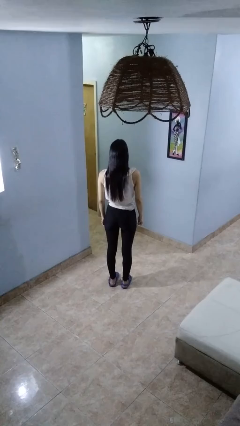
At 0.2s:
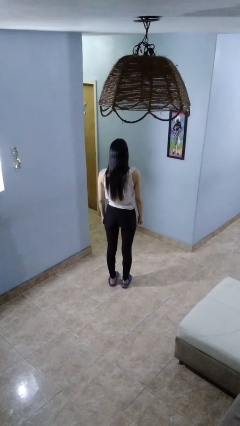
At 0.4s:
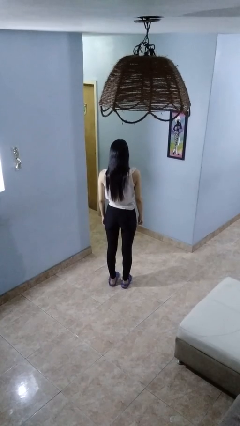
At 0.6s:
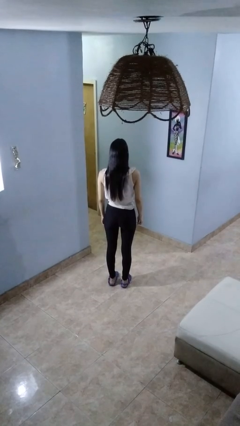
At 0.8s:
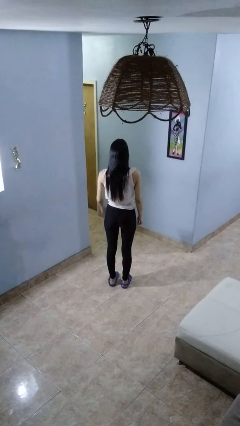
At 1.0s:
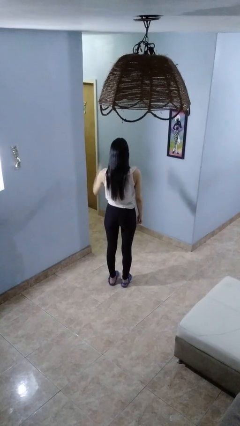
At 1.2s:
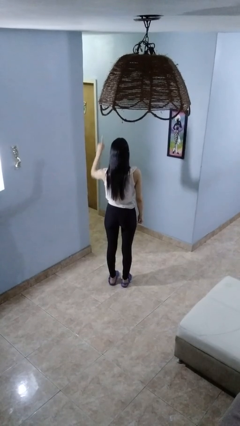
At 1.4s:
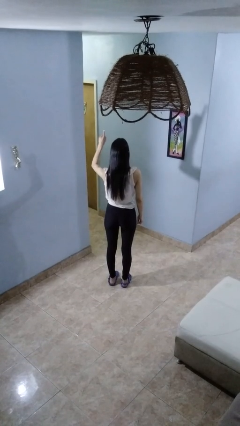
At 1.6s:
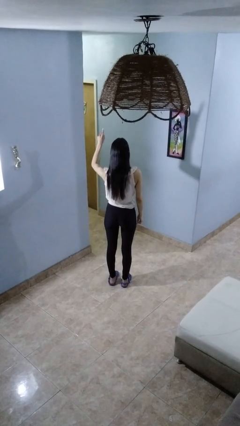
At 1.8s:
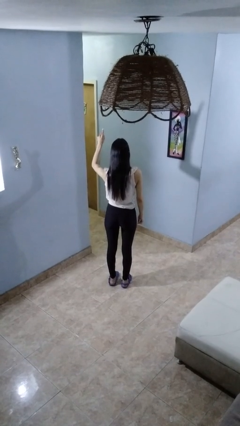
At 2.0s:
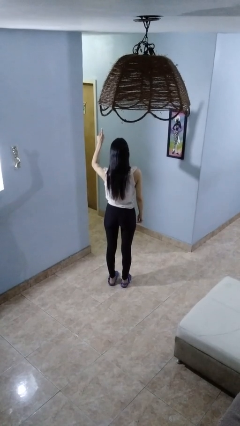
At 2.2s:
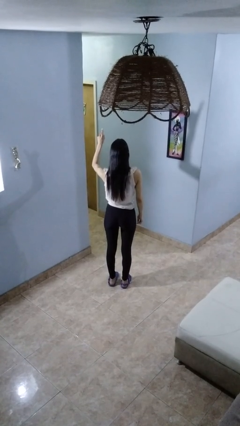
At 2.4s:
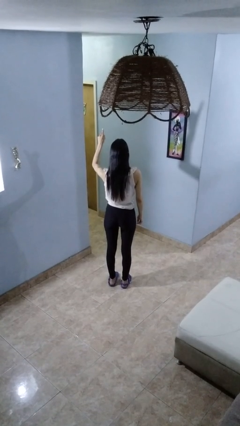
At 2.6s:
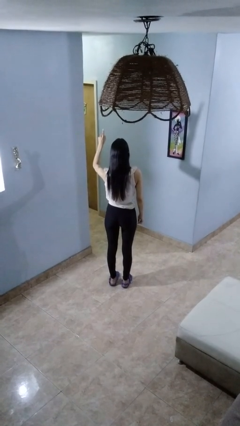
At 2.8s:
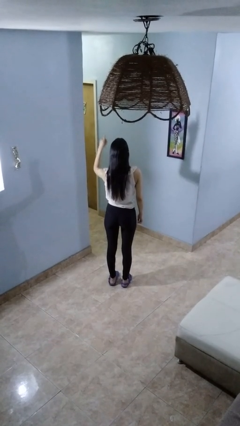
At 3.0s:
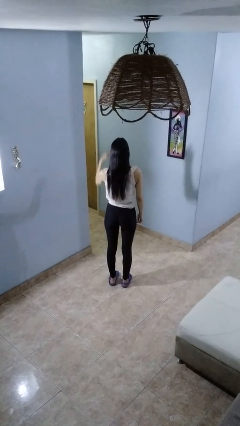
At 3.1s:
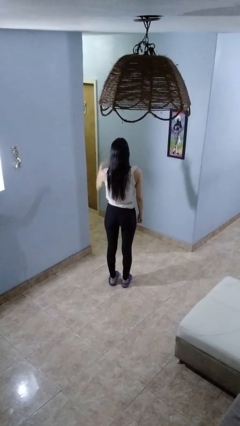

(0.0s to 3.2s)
person gestures number one

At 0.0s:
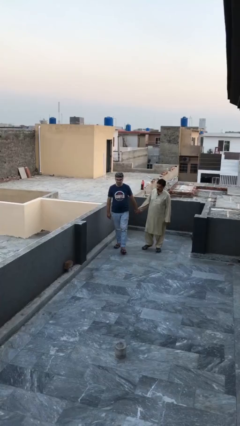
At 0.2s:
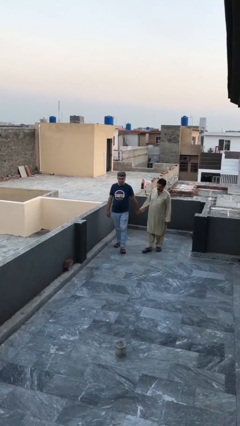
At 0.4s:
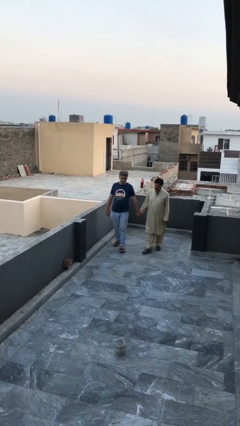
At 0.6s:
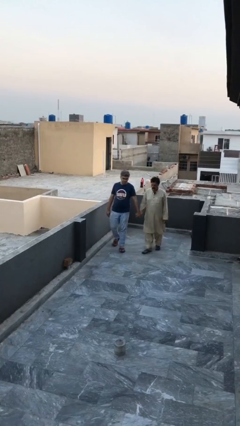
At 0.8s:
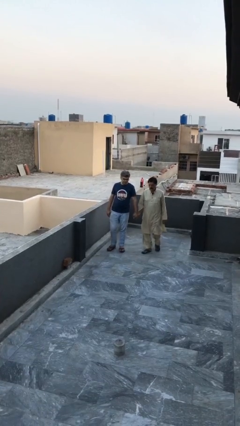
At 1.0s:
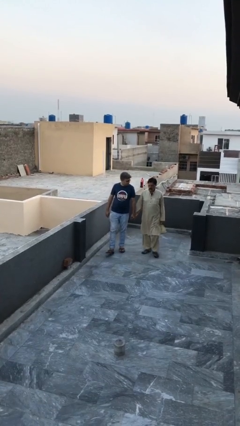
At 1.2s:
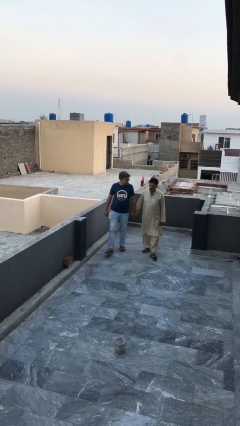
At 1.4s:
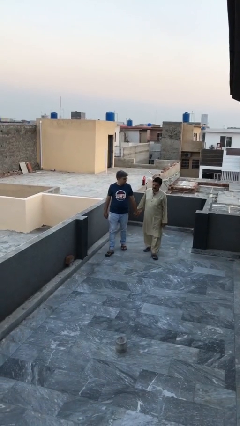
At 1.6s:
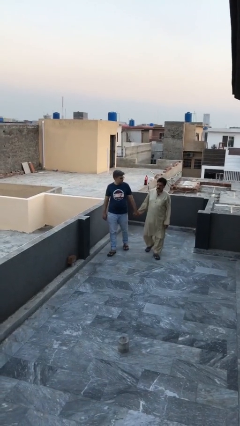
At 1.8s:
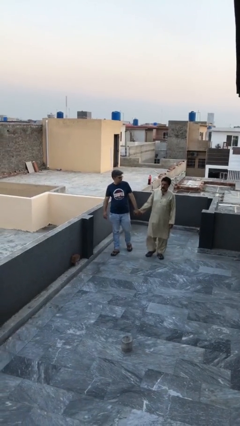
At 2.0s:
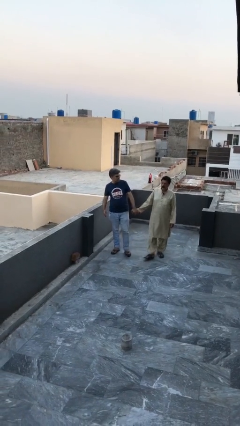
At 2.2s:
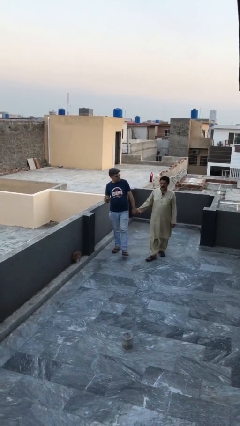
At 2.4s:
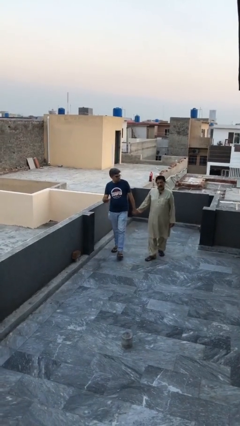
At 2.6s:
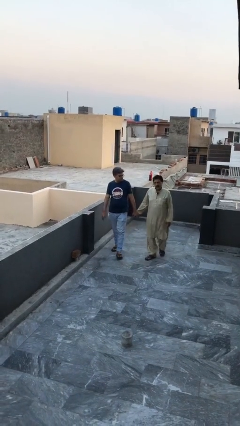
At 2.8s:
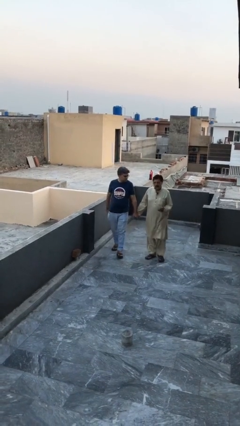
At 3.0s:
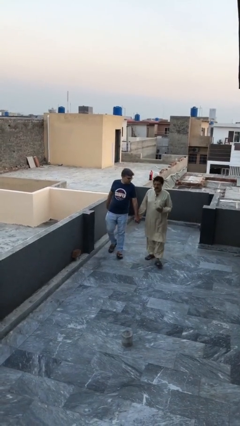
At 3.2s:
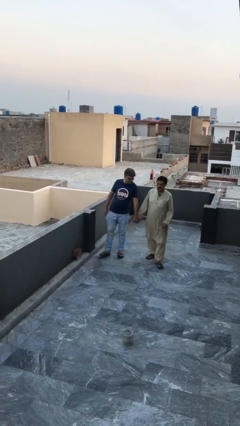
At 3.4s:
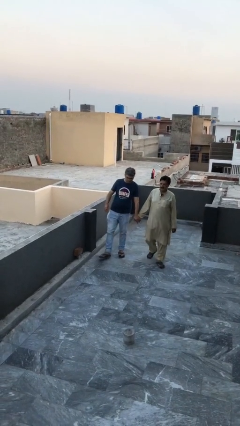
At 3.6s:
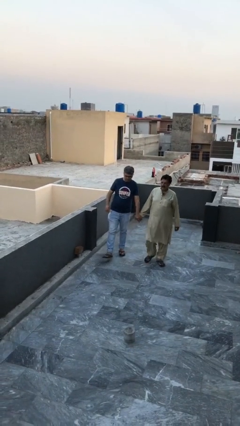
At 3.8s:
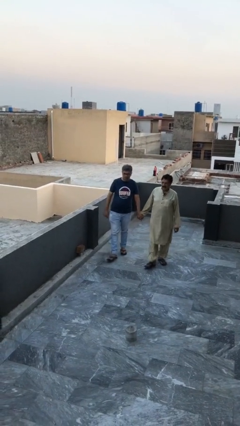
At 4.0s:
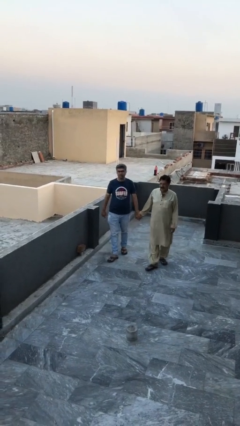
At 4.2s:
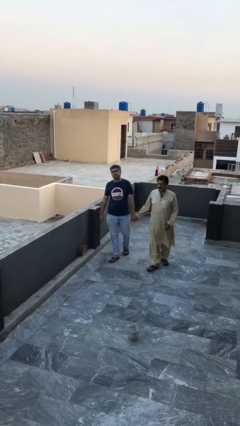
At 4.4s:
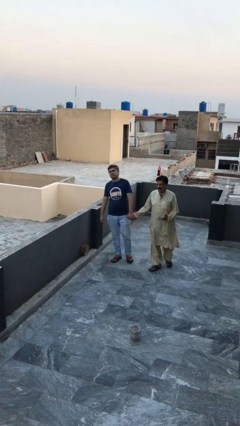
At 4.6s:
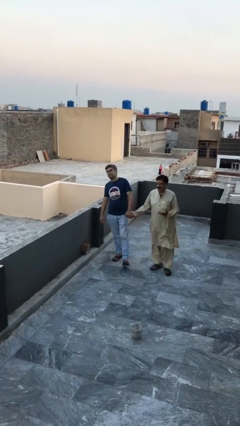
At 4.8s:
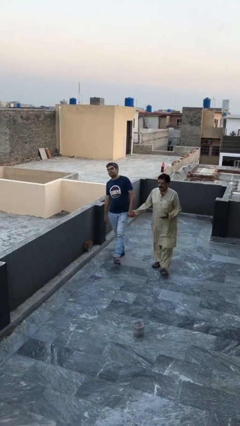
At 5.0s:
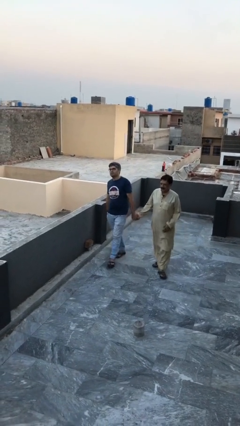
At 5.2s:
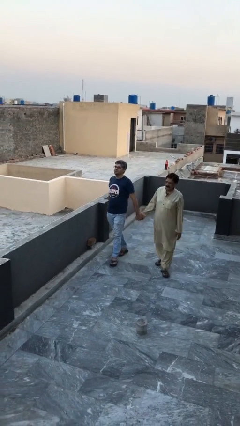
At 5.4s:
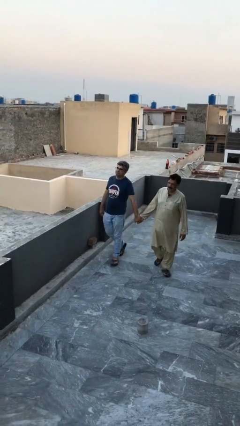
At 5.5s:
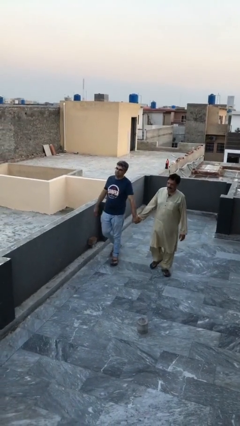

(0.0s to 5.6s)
person holds hand

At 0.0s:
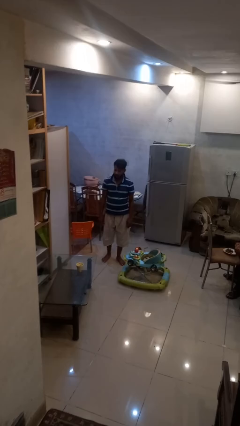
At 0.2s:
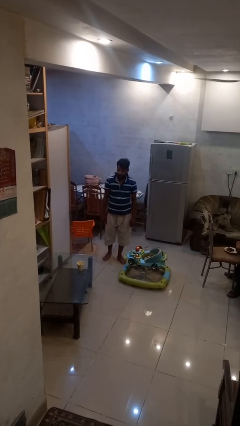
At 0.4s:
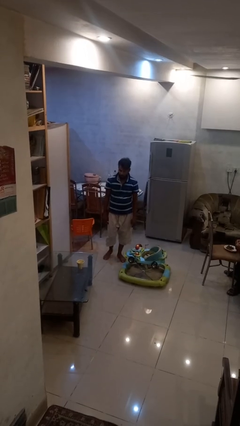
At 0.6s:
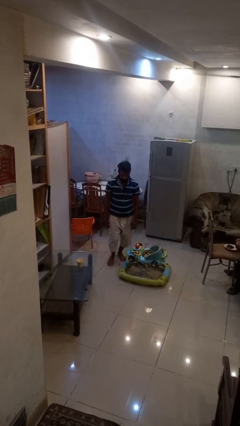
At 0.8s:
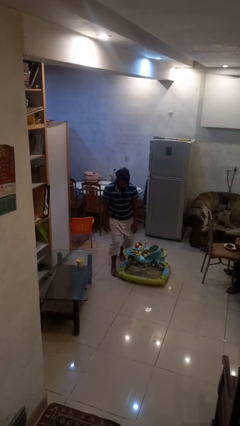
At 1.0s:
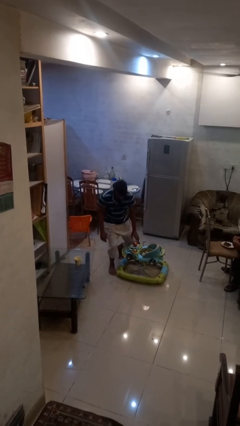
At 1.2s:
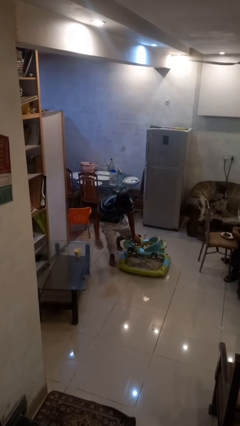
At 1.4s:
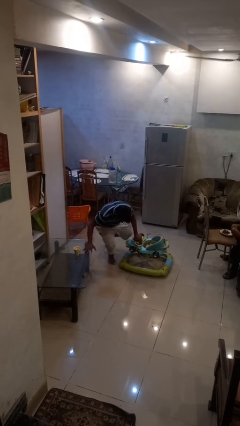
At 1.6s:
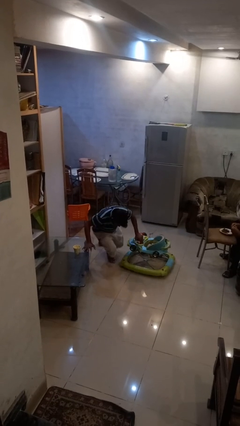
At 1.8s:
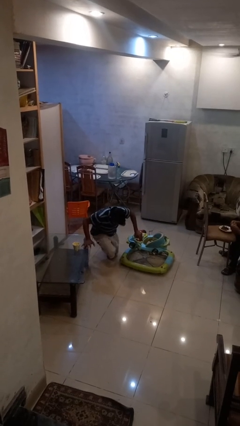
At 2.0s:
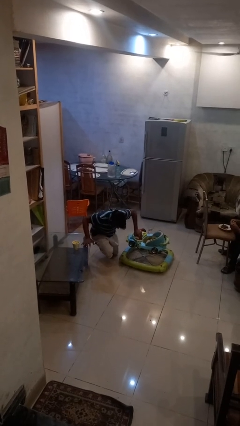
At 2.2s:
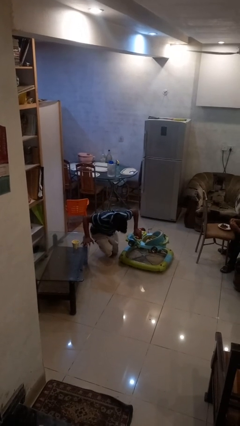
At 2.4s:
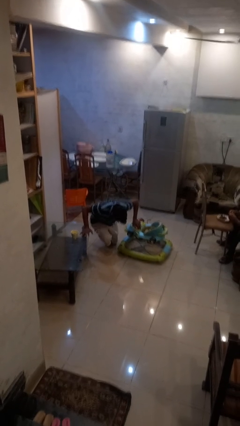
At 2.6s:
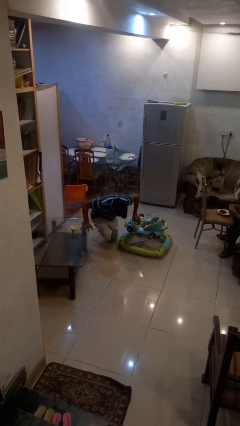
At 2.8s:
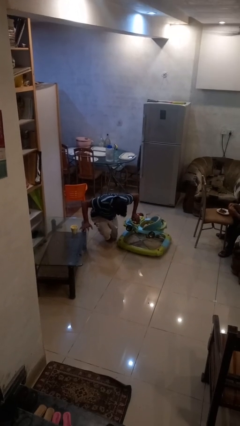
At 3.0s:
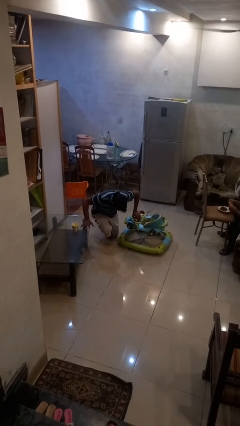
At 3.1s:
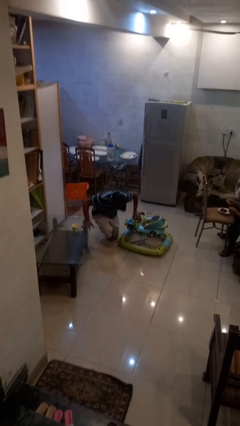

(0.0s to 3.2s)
person trips on object on floor

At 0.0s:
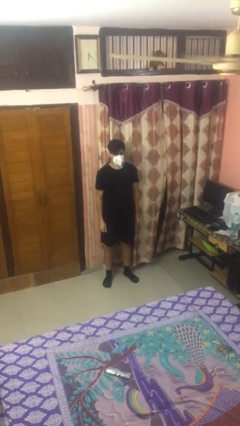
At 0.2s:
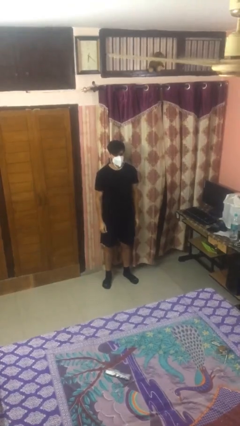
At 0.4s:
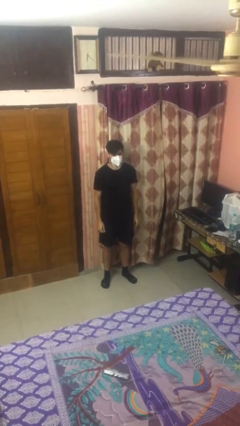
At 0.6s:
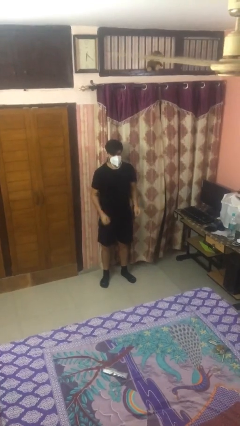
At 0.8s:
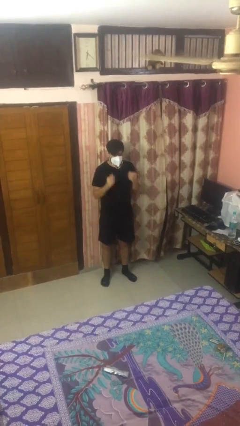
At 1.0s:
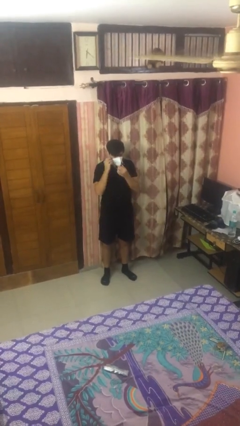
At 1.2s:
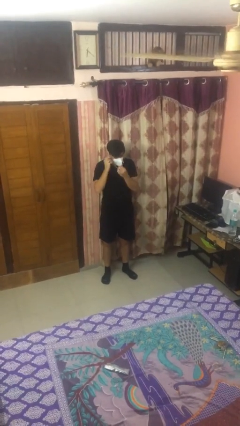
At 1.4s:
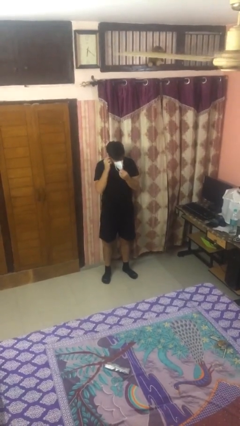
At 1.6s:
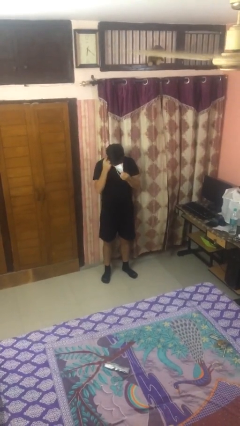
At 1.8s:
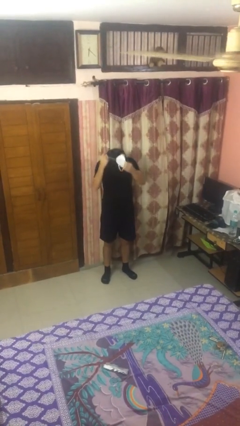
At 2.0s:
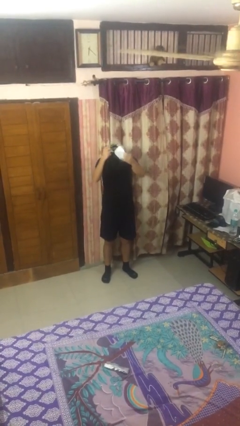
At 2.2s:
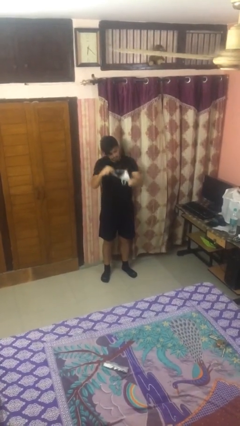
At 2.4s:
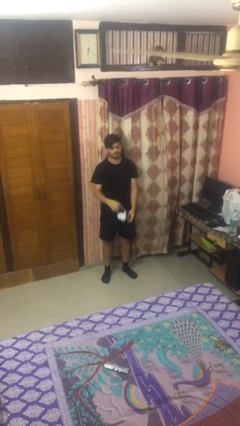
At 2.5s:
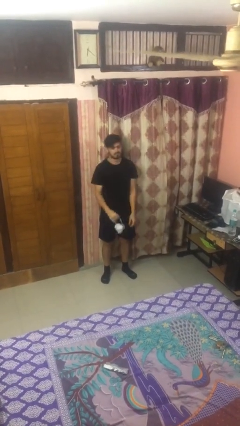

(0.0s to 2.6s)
person takes off facemask

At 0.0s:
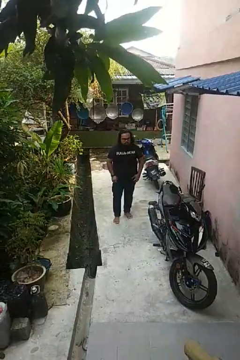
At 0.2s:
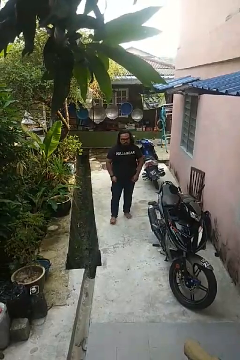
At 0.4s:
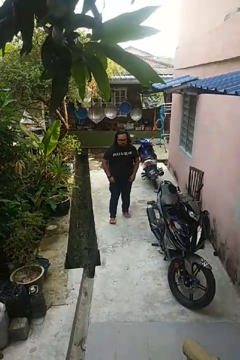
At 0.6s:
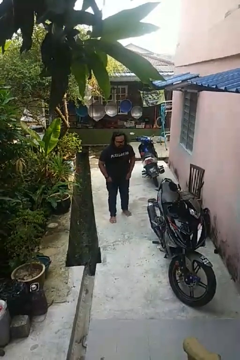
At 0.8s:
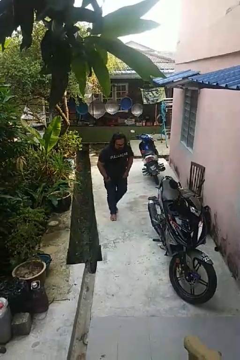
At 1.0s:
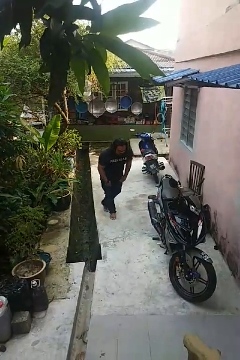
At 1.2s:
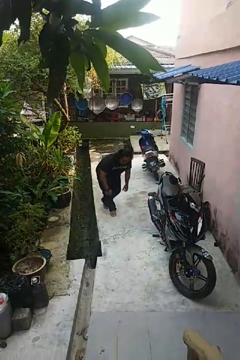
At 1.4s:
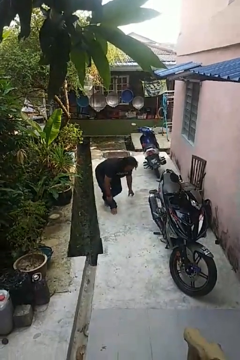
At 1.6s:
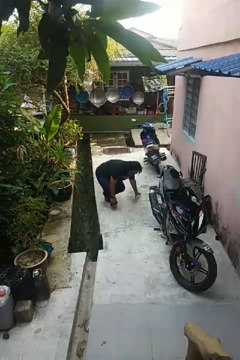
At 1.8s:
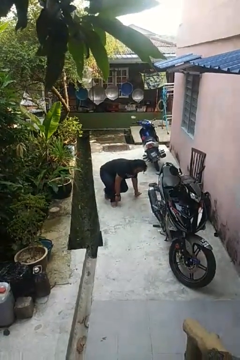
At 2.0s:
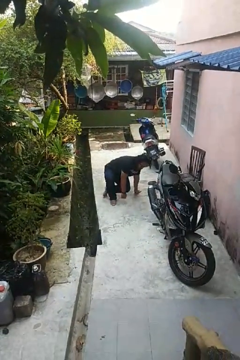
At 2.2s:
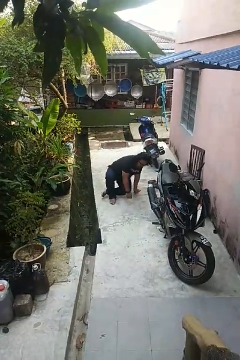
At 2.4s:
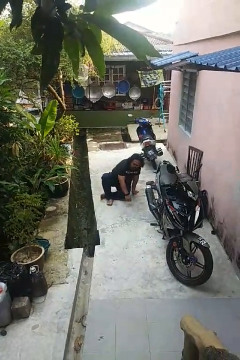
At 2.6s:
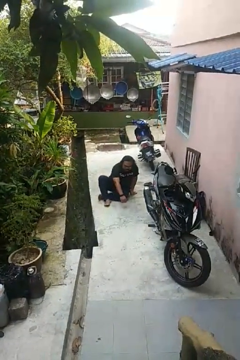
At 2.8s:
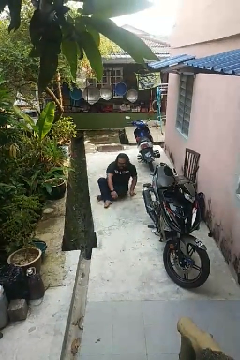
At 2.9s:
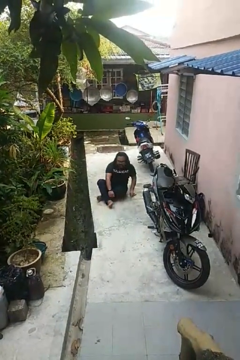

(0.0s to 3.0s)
person sits crisscross

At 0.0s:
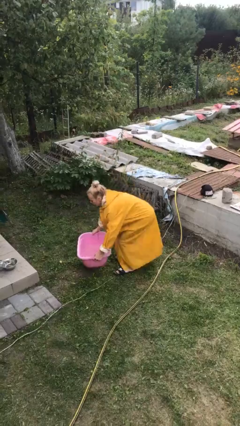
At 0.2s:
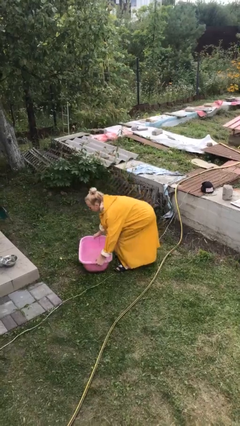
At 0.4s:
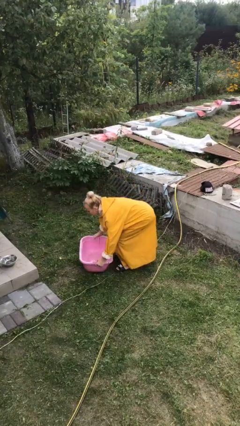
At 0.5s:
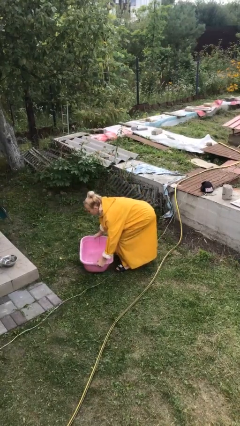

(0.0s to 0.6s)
person puts down object on floor
